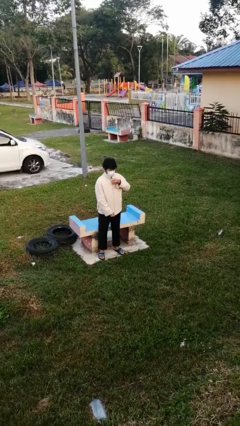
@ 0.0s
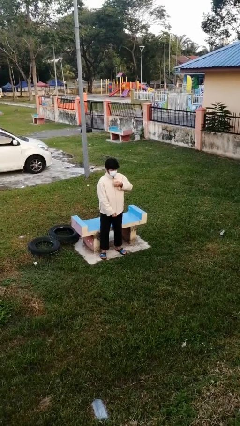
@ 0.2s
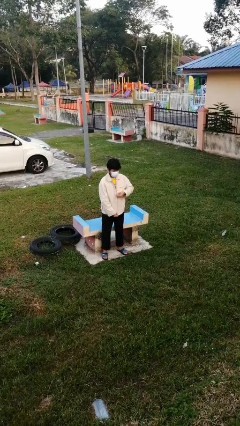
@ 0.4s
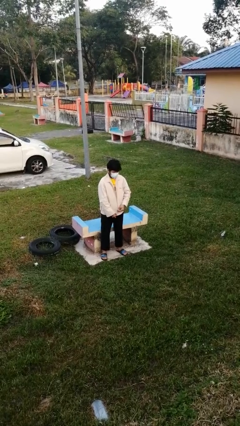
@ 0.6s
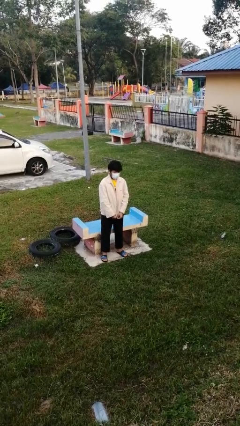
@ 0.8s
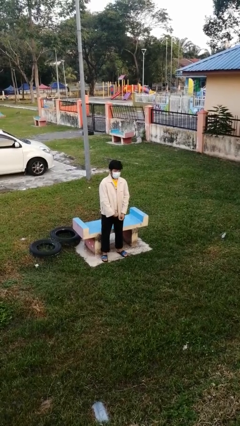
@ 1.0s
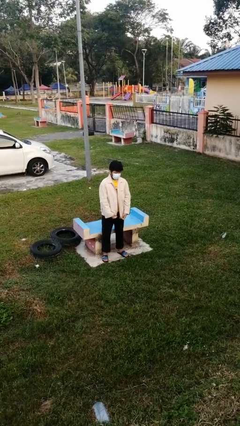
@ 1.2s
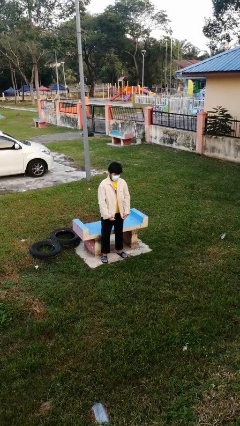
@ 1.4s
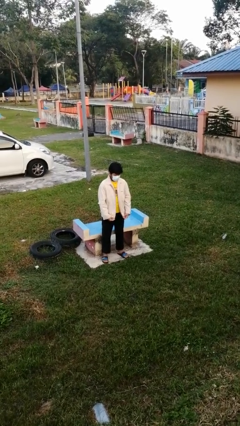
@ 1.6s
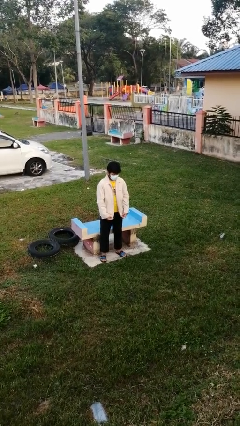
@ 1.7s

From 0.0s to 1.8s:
person unzips jacket

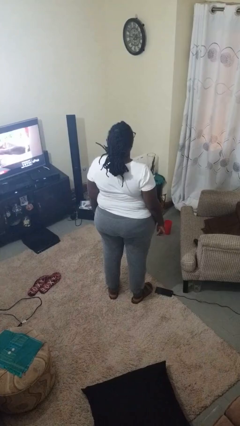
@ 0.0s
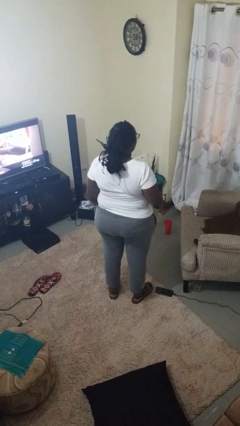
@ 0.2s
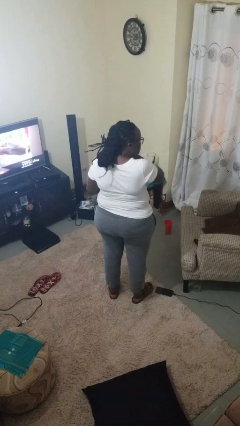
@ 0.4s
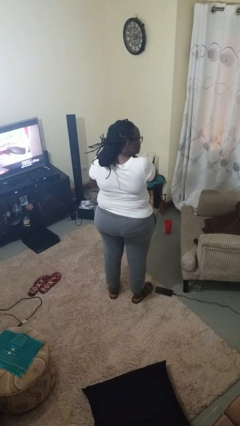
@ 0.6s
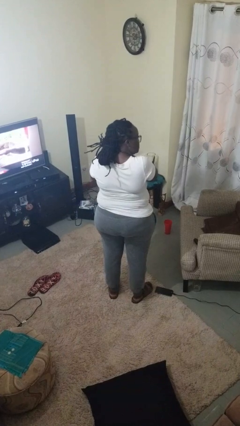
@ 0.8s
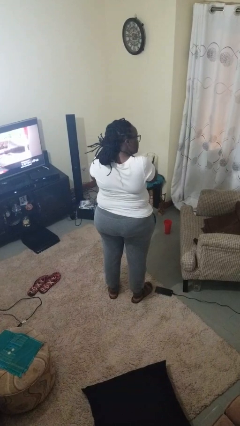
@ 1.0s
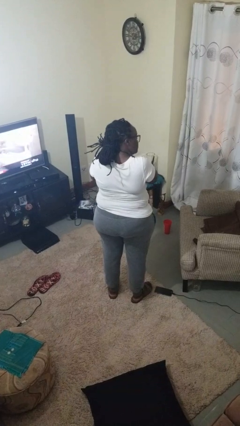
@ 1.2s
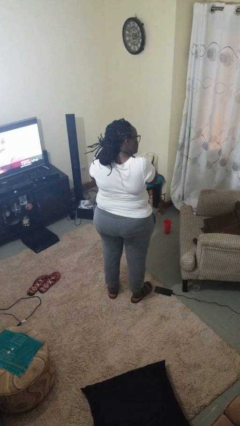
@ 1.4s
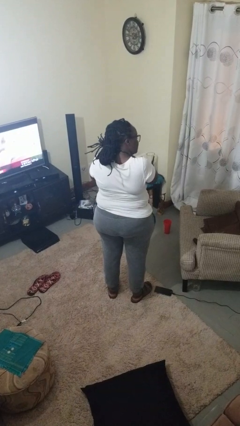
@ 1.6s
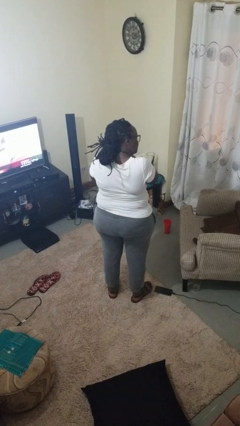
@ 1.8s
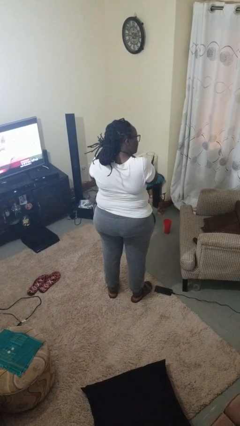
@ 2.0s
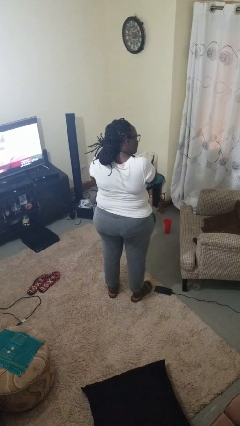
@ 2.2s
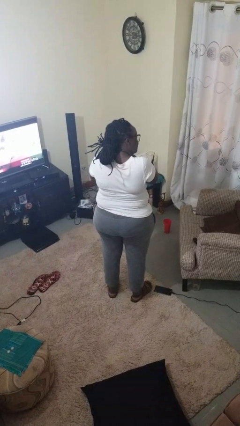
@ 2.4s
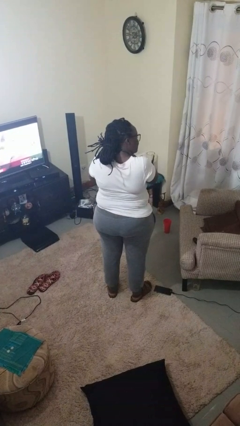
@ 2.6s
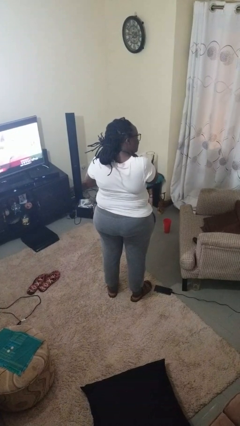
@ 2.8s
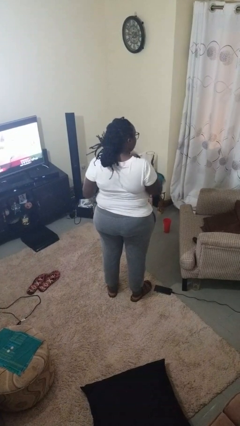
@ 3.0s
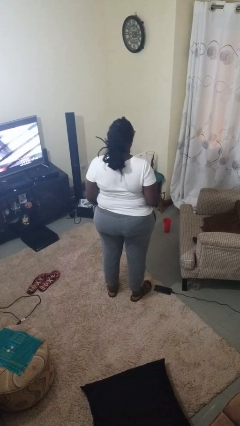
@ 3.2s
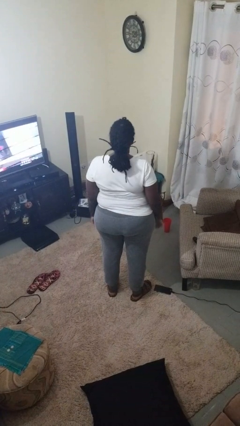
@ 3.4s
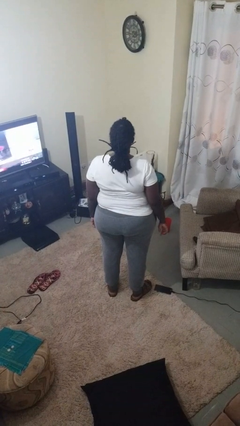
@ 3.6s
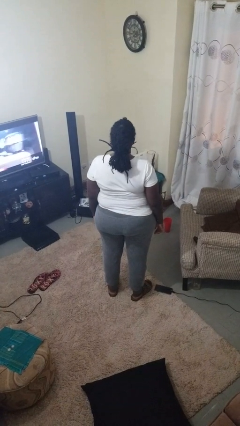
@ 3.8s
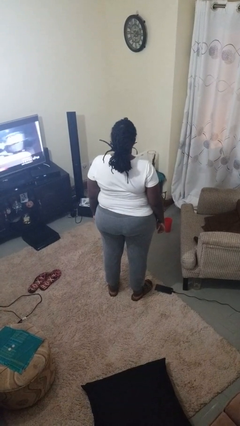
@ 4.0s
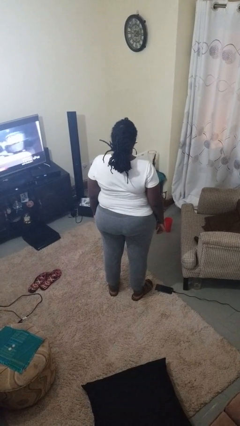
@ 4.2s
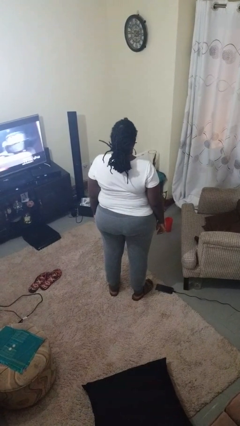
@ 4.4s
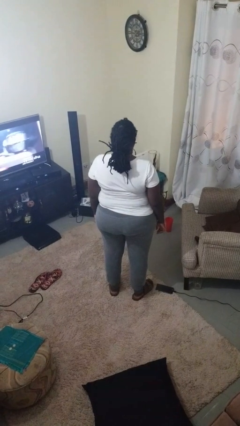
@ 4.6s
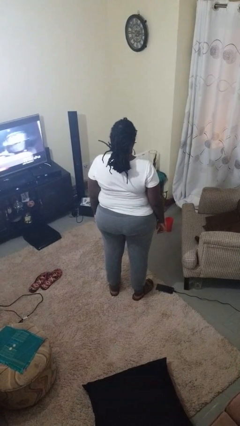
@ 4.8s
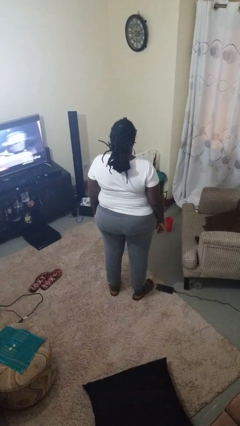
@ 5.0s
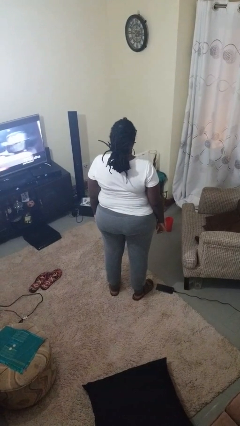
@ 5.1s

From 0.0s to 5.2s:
person puts on earrings

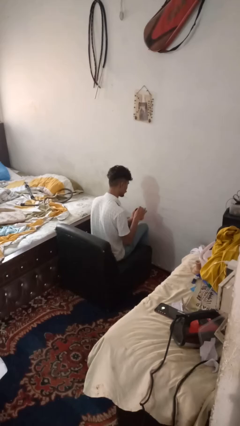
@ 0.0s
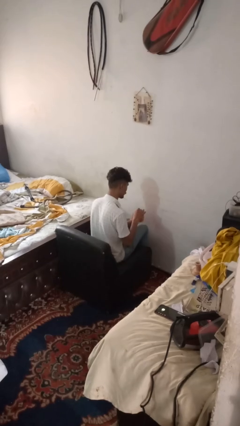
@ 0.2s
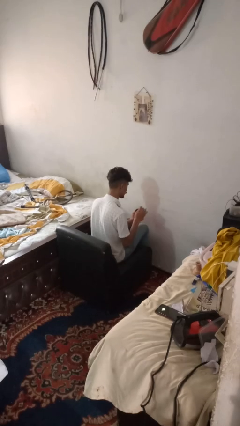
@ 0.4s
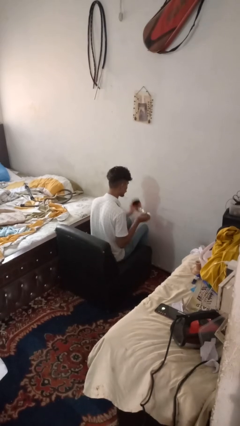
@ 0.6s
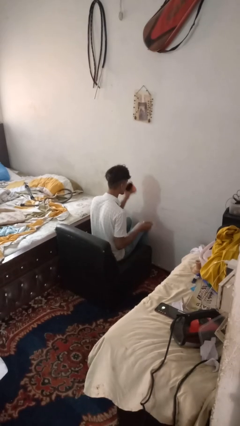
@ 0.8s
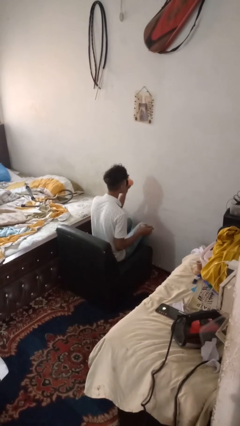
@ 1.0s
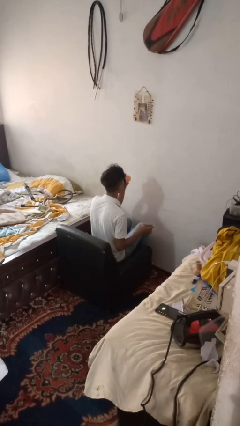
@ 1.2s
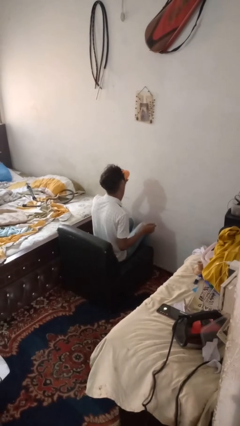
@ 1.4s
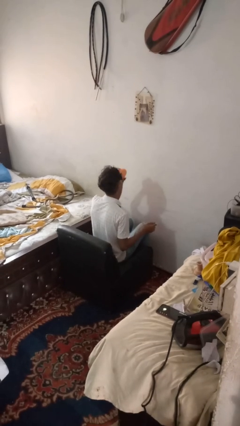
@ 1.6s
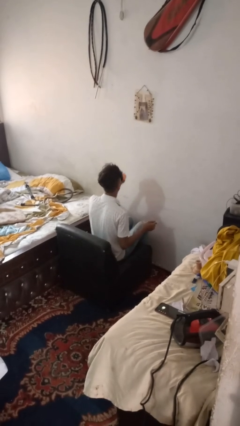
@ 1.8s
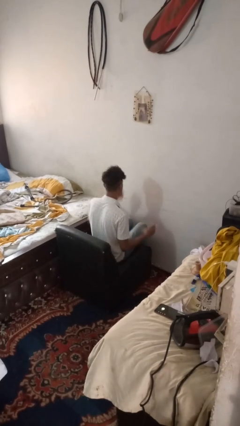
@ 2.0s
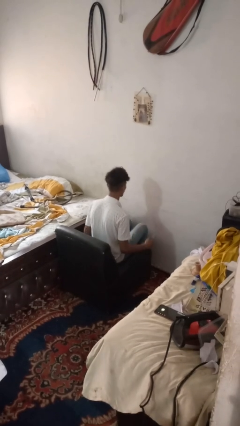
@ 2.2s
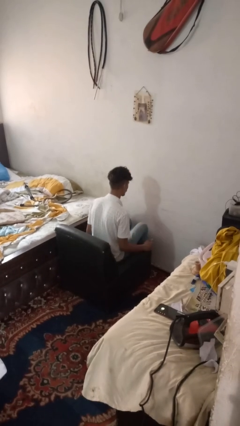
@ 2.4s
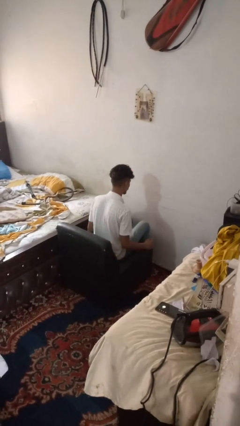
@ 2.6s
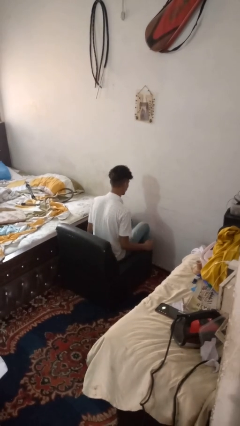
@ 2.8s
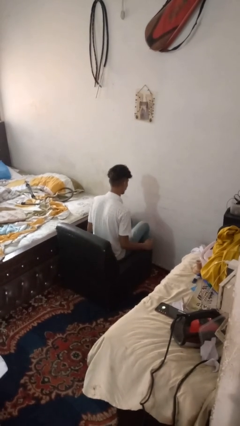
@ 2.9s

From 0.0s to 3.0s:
person drinks from mug

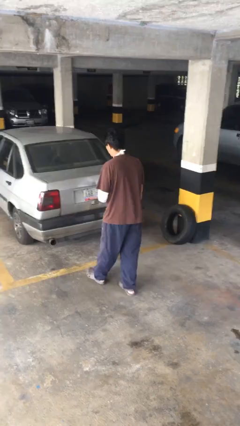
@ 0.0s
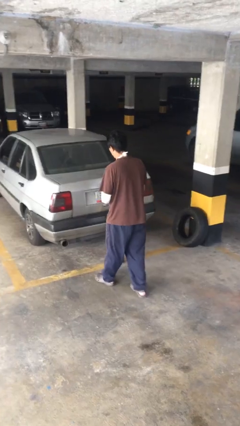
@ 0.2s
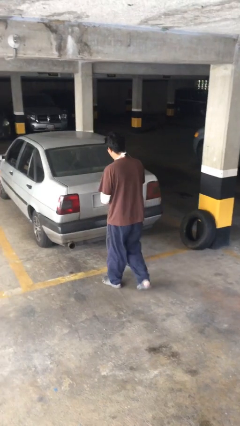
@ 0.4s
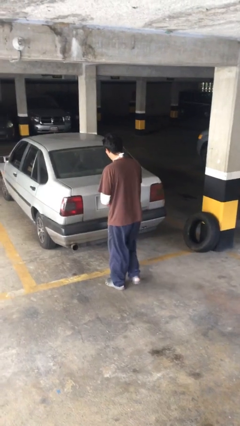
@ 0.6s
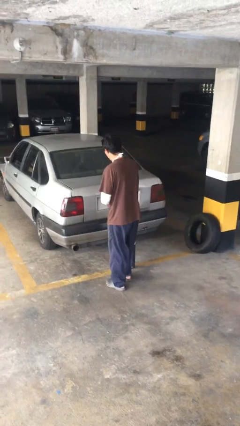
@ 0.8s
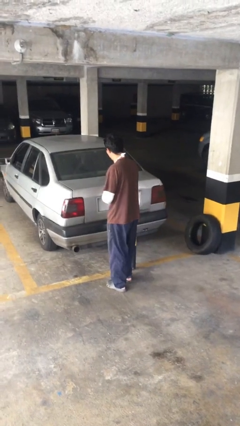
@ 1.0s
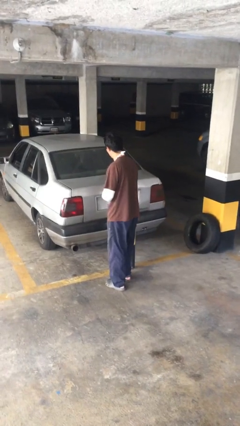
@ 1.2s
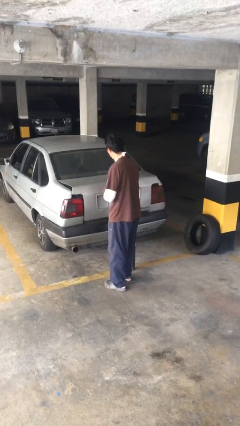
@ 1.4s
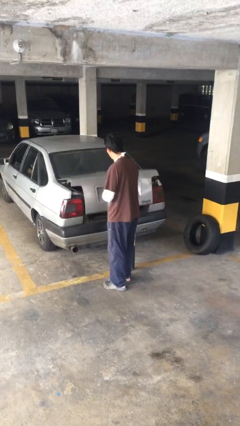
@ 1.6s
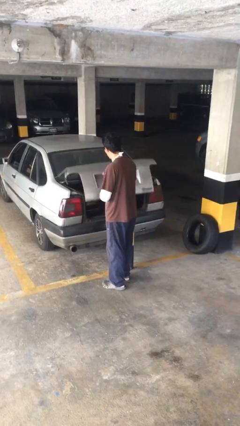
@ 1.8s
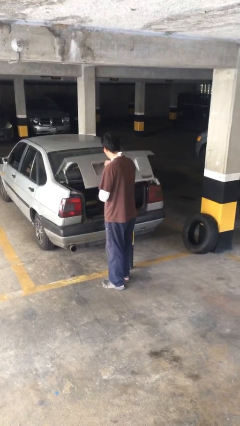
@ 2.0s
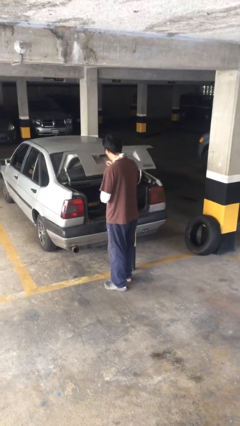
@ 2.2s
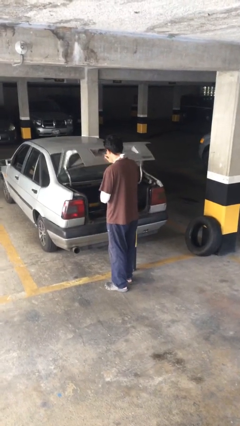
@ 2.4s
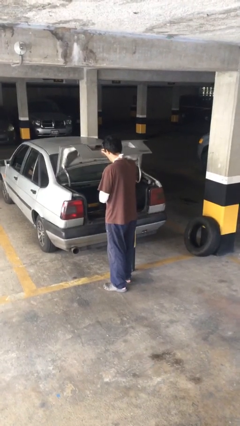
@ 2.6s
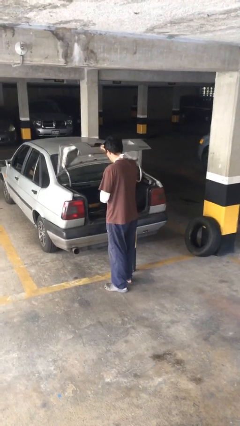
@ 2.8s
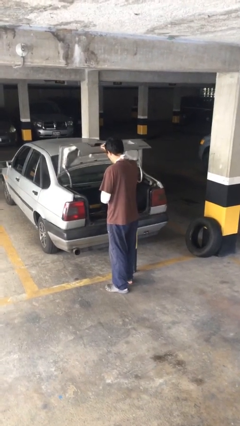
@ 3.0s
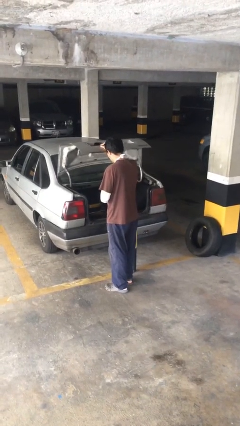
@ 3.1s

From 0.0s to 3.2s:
person opens car trunk

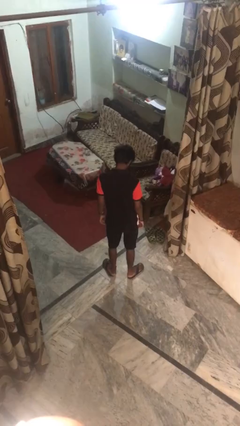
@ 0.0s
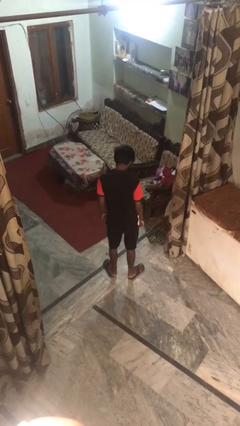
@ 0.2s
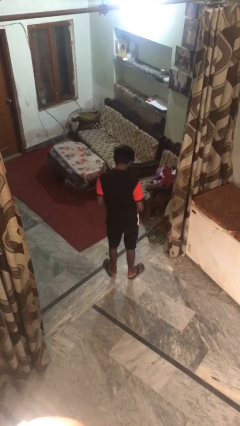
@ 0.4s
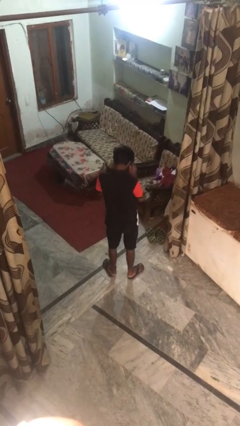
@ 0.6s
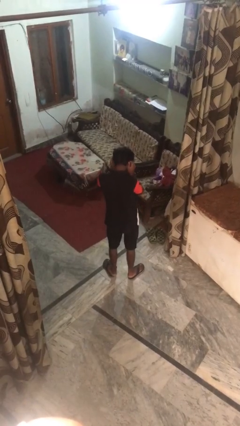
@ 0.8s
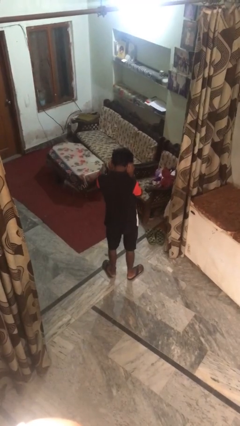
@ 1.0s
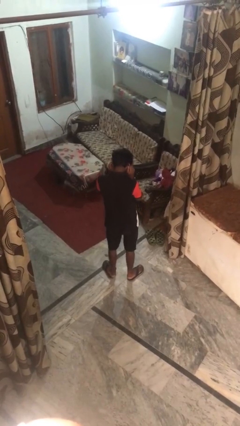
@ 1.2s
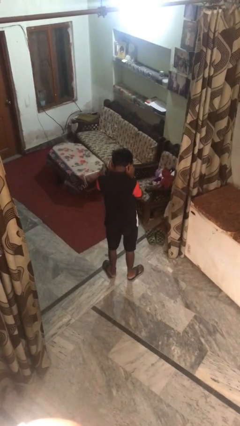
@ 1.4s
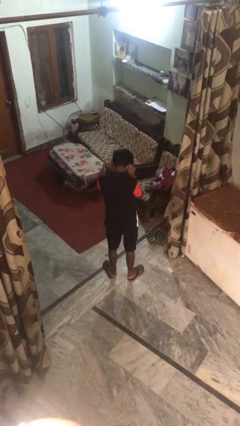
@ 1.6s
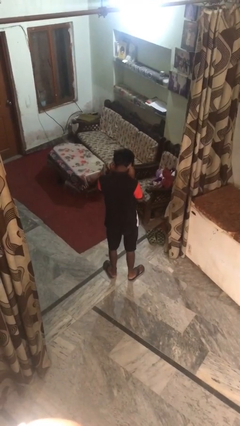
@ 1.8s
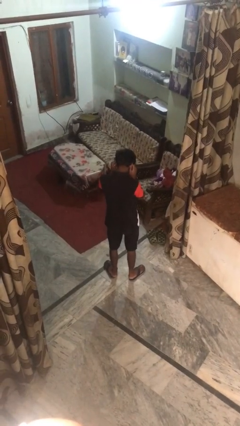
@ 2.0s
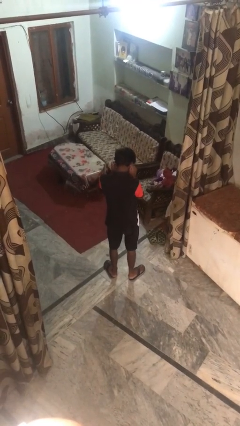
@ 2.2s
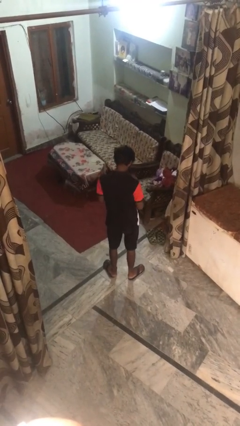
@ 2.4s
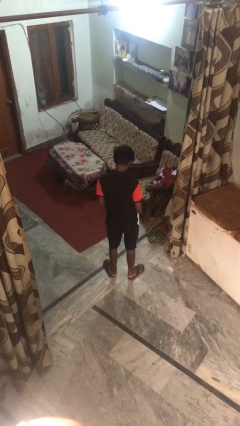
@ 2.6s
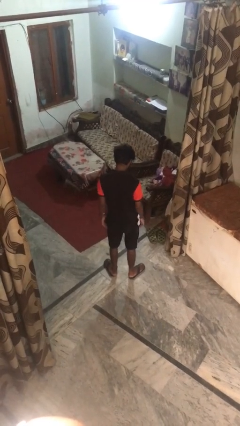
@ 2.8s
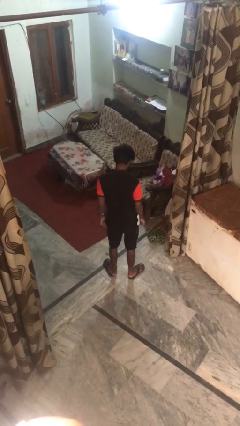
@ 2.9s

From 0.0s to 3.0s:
person touches earlobe

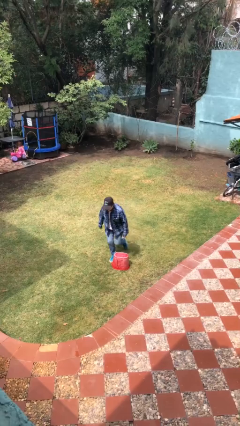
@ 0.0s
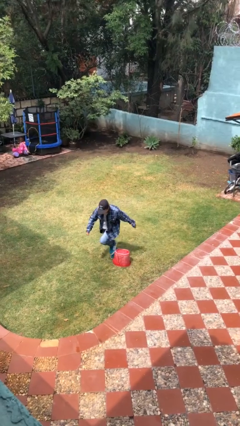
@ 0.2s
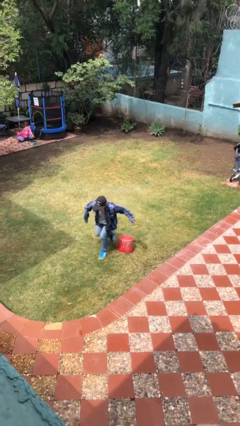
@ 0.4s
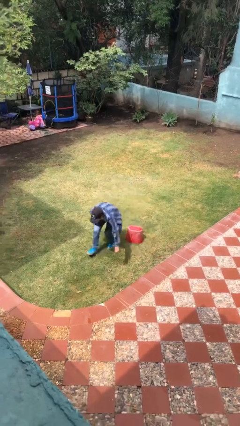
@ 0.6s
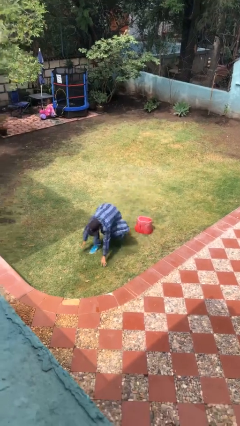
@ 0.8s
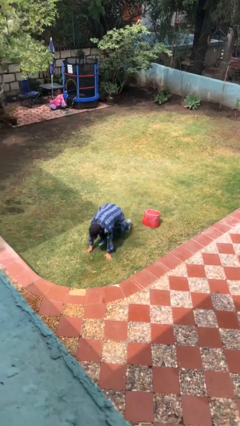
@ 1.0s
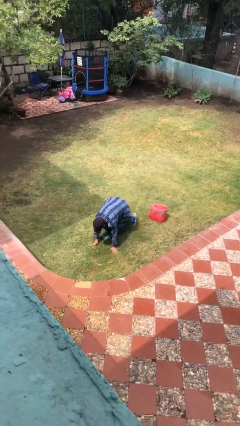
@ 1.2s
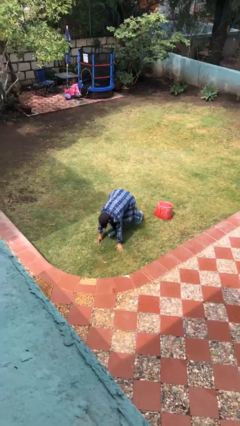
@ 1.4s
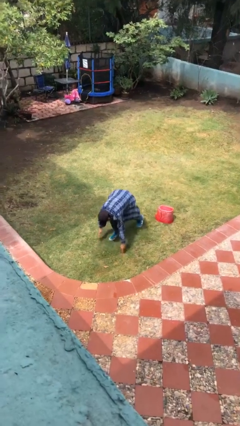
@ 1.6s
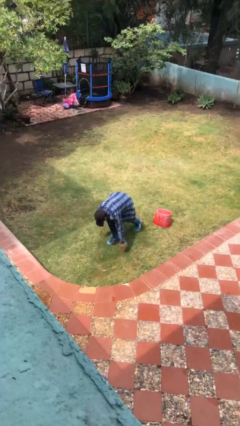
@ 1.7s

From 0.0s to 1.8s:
person trips on object on floor
